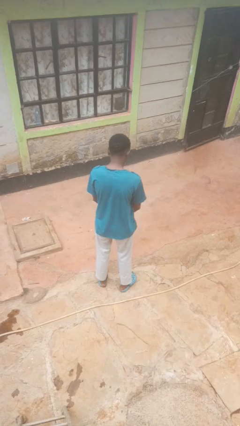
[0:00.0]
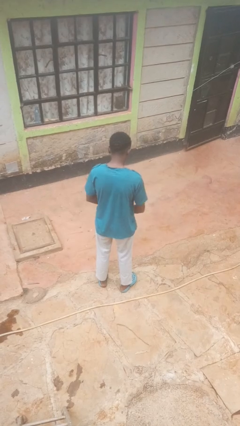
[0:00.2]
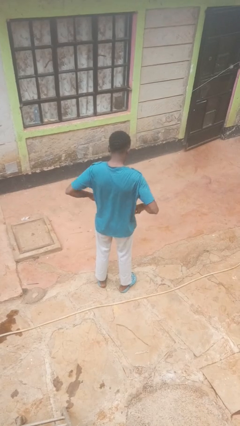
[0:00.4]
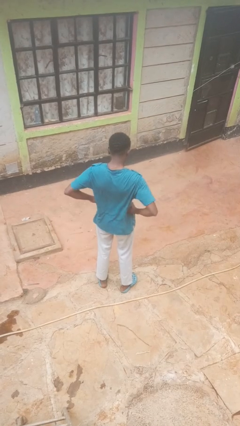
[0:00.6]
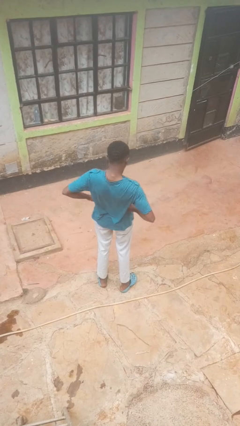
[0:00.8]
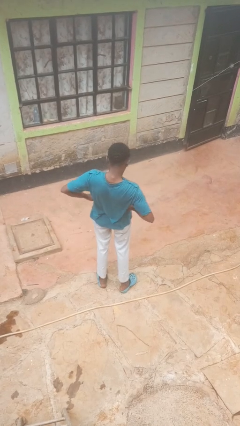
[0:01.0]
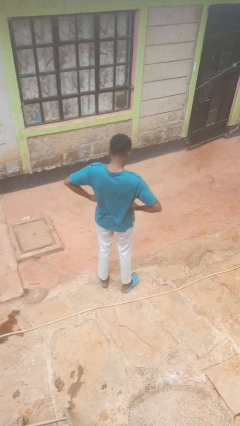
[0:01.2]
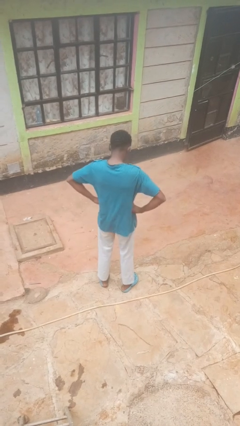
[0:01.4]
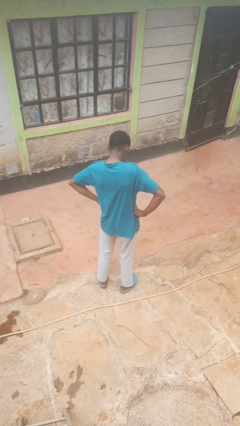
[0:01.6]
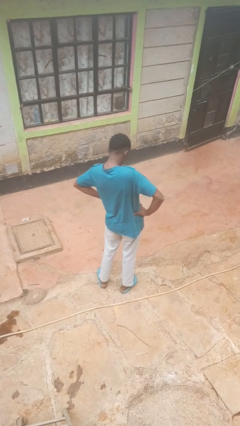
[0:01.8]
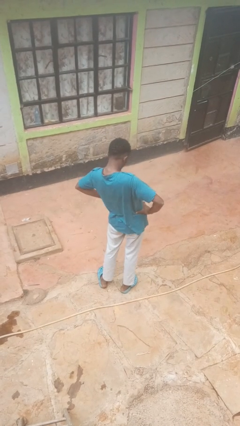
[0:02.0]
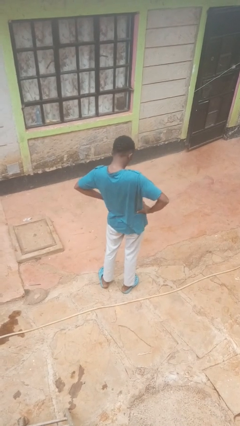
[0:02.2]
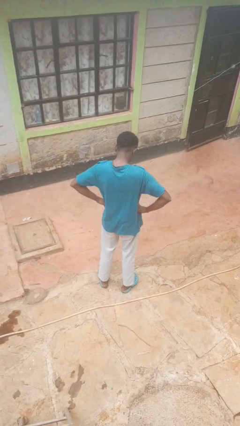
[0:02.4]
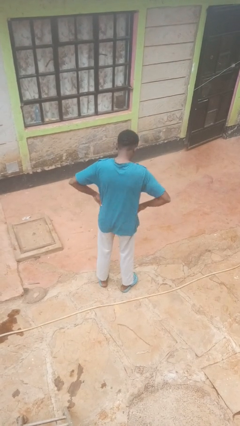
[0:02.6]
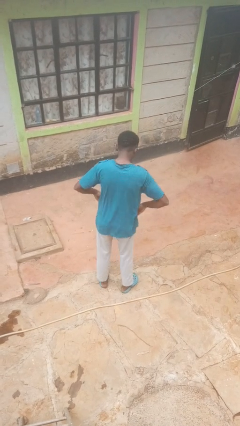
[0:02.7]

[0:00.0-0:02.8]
person wiggles hips

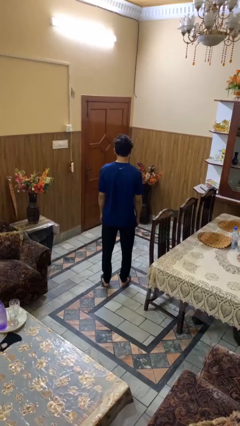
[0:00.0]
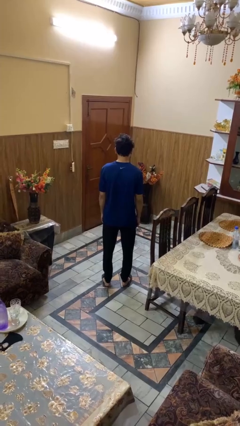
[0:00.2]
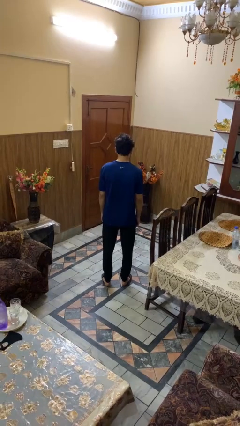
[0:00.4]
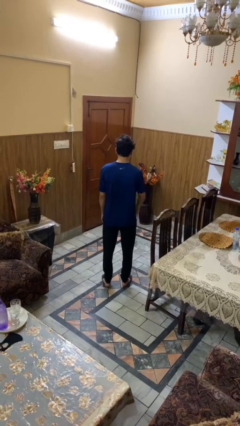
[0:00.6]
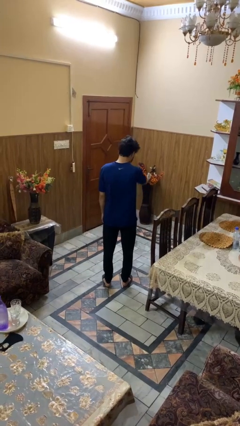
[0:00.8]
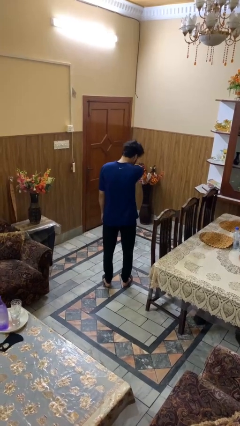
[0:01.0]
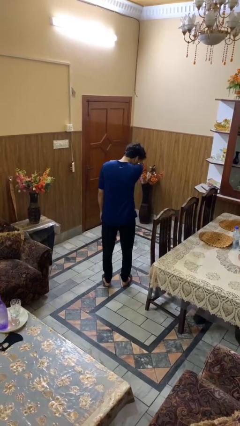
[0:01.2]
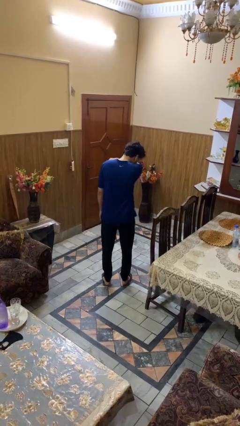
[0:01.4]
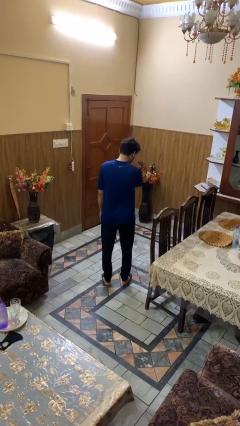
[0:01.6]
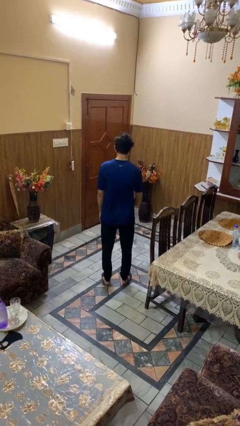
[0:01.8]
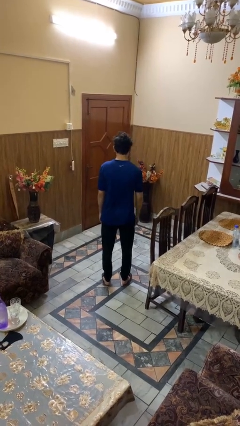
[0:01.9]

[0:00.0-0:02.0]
person sneezes into arm

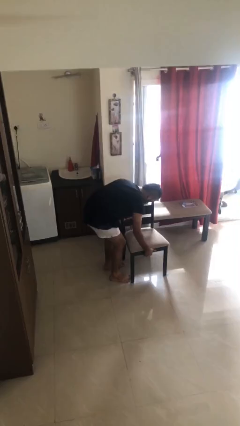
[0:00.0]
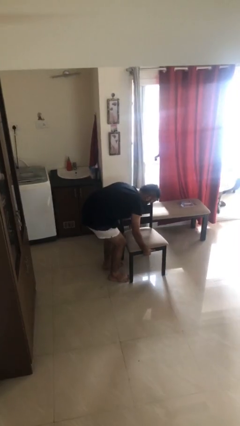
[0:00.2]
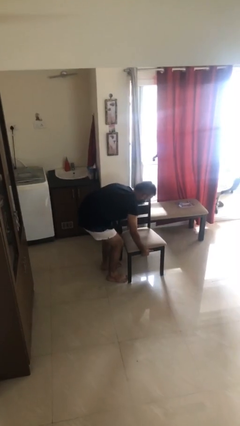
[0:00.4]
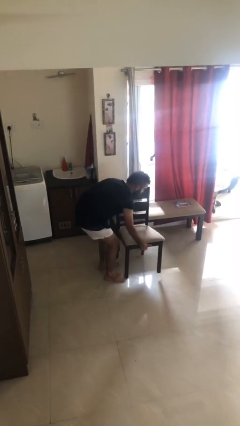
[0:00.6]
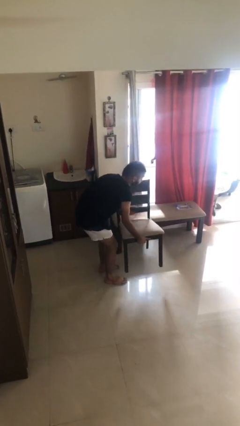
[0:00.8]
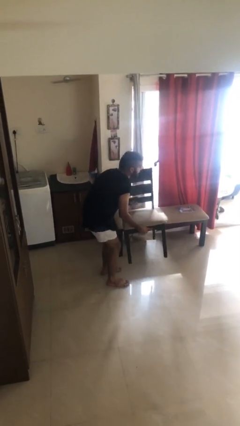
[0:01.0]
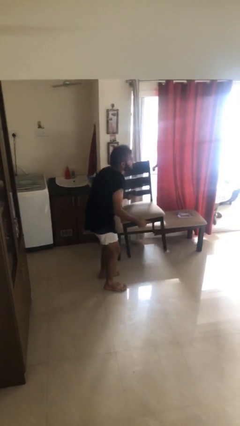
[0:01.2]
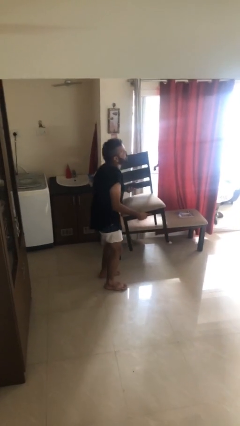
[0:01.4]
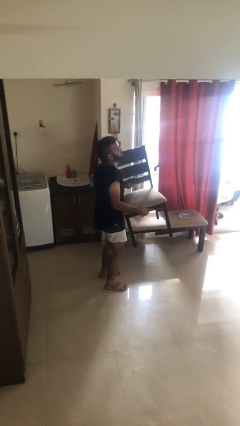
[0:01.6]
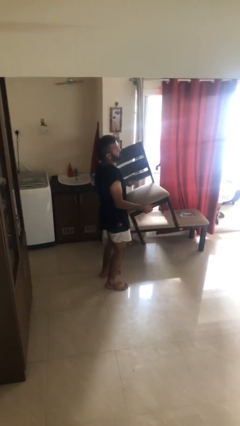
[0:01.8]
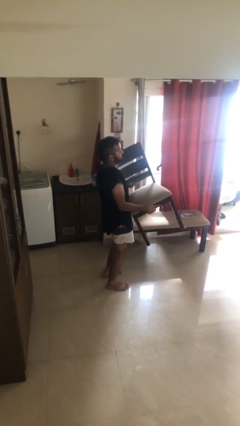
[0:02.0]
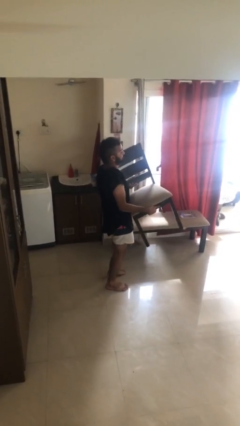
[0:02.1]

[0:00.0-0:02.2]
person picks up object from floor

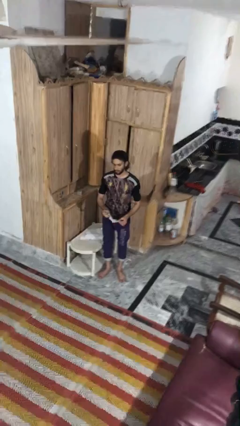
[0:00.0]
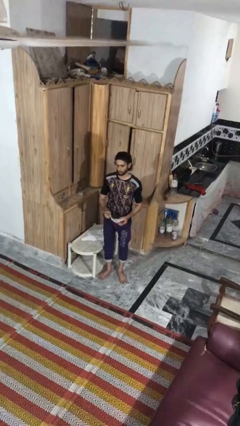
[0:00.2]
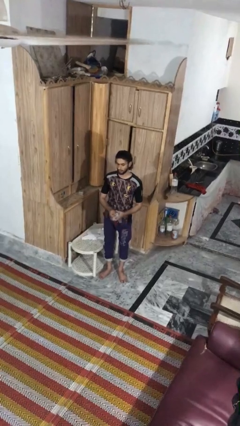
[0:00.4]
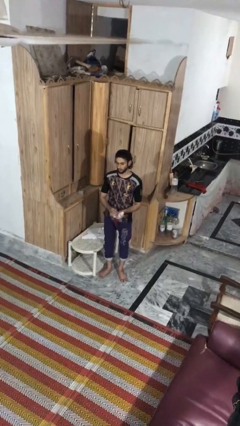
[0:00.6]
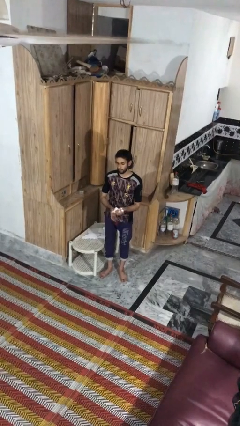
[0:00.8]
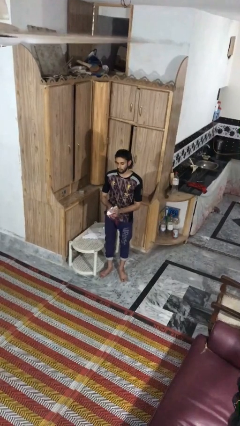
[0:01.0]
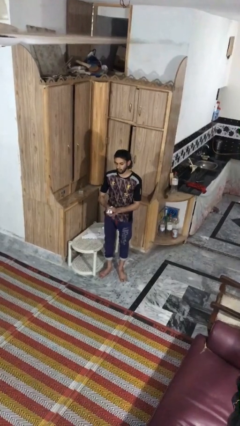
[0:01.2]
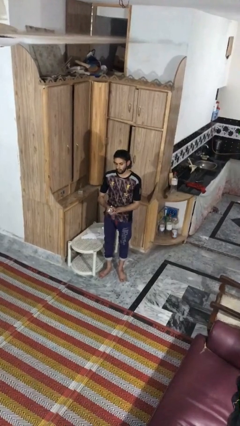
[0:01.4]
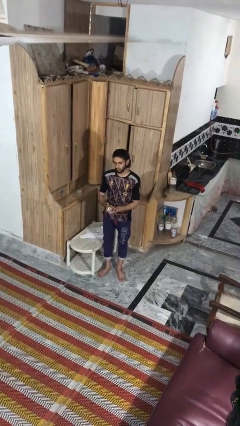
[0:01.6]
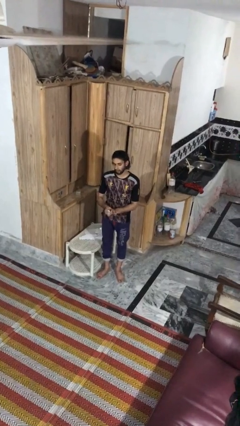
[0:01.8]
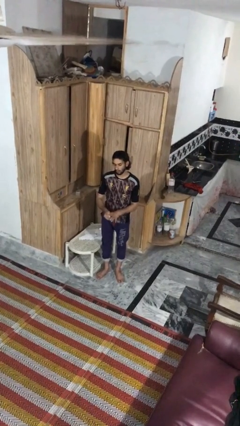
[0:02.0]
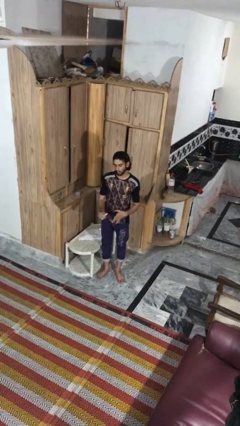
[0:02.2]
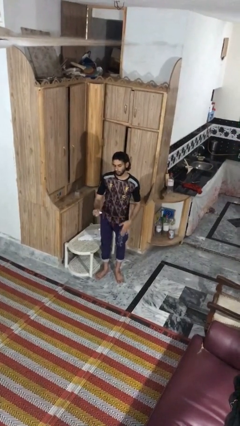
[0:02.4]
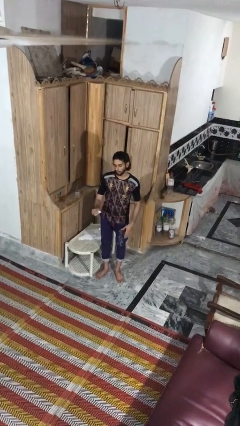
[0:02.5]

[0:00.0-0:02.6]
person crumples paper

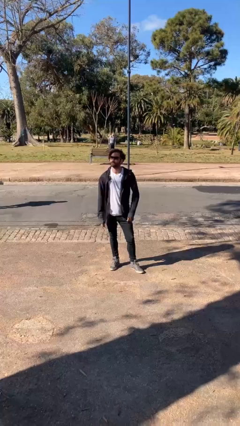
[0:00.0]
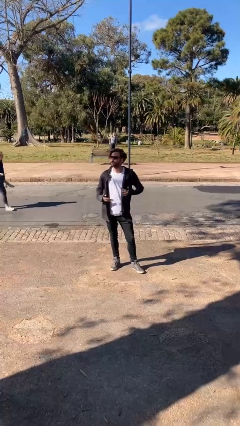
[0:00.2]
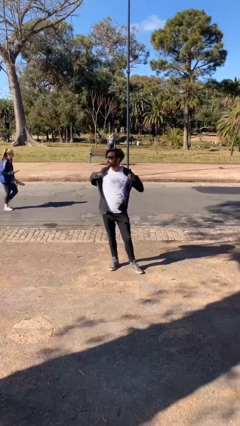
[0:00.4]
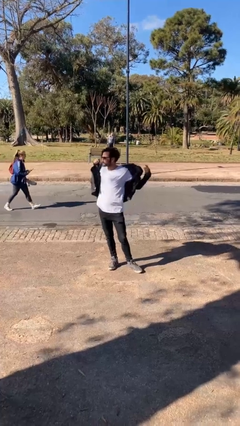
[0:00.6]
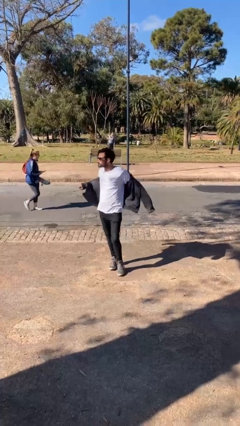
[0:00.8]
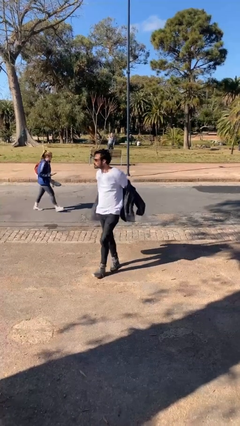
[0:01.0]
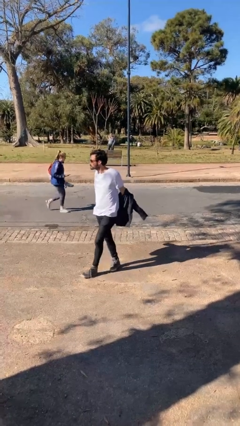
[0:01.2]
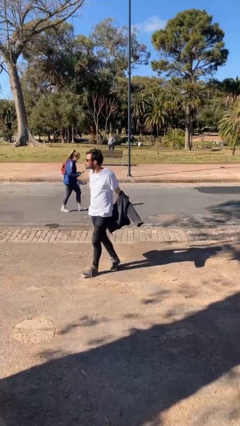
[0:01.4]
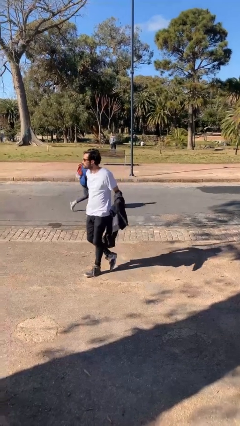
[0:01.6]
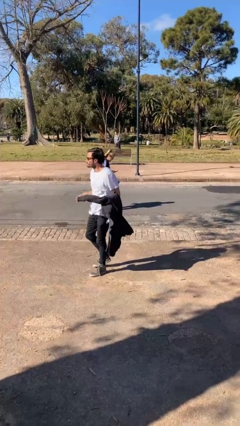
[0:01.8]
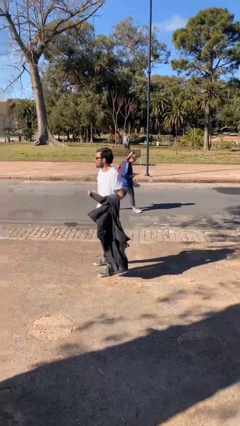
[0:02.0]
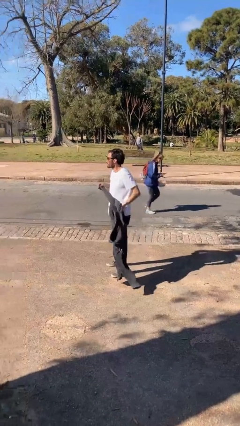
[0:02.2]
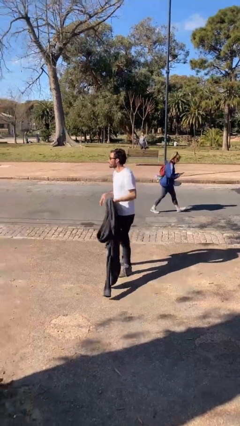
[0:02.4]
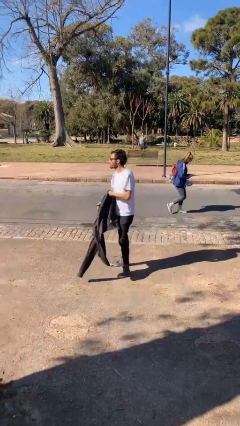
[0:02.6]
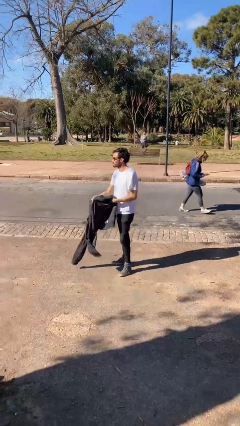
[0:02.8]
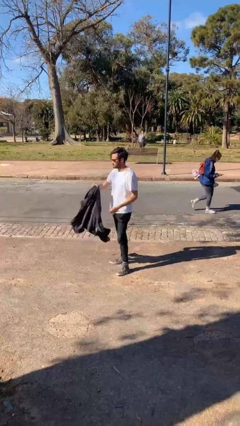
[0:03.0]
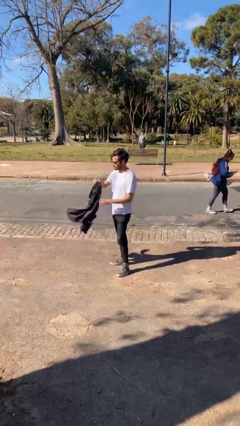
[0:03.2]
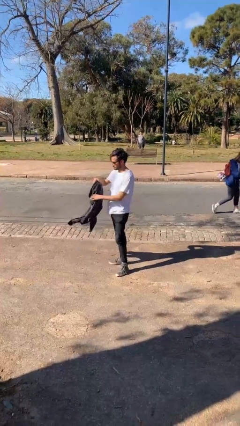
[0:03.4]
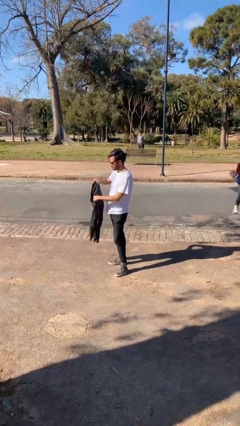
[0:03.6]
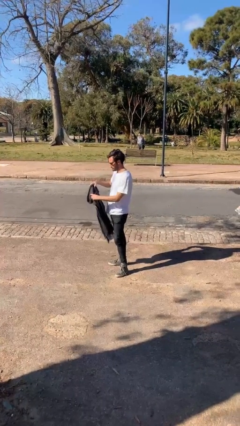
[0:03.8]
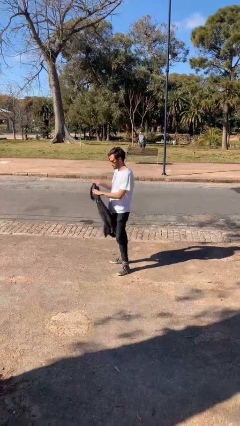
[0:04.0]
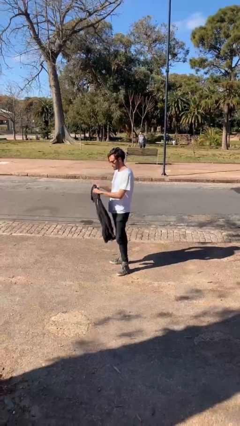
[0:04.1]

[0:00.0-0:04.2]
person takes off jacket

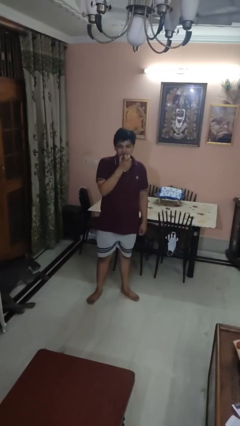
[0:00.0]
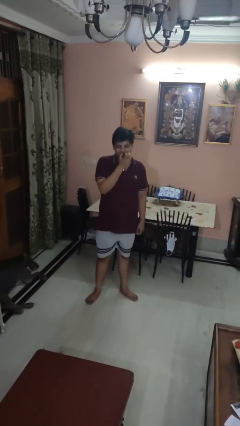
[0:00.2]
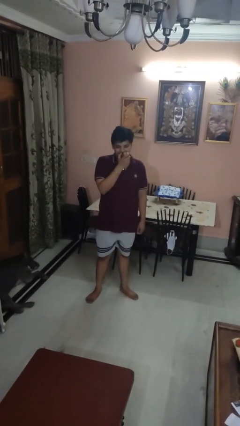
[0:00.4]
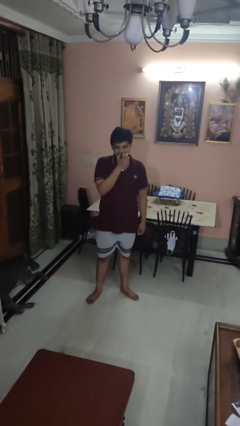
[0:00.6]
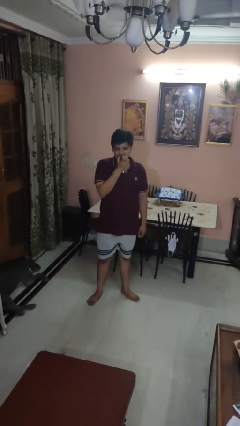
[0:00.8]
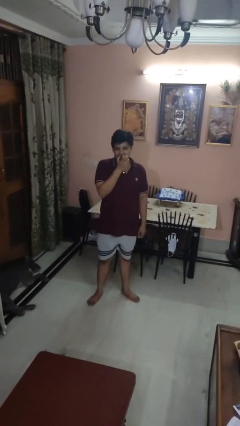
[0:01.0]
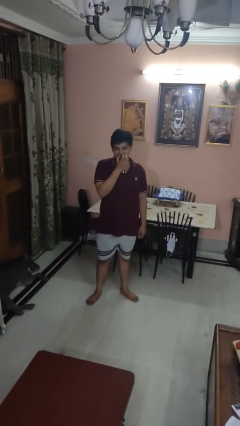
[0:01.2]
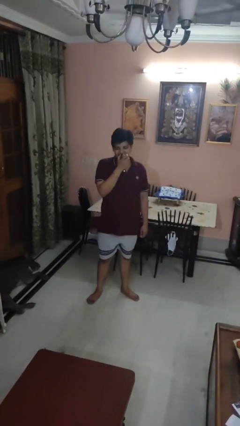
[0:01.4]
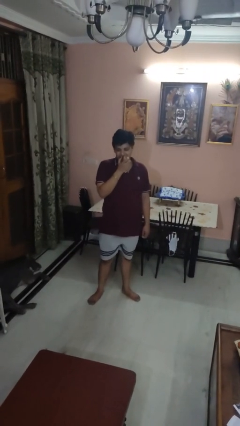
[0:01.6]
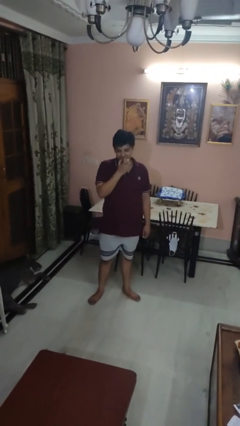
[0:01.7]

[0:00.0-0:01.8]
person eats apple

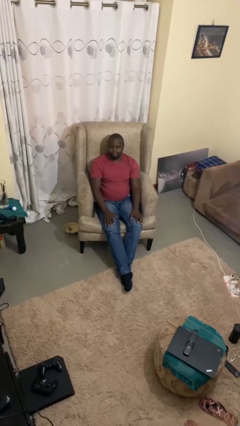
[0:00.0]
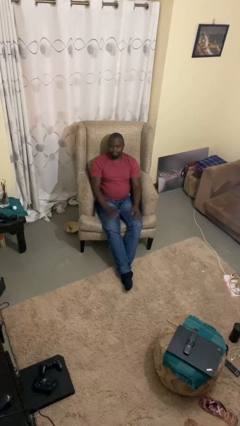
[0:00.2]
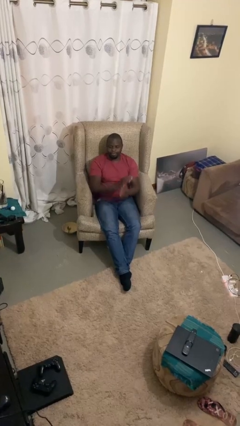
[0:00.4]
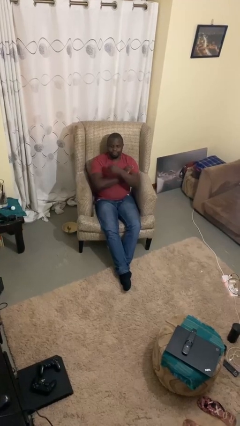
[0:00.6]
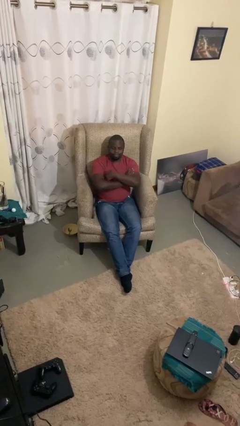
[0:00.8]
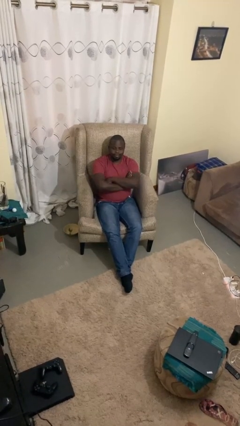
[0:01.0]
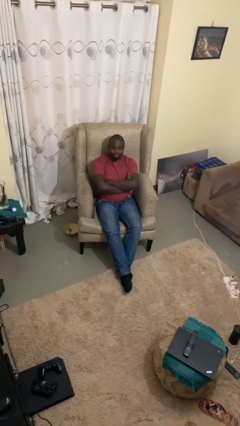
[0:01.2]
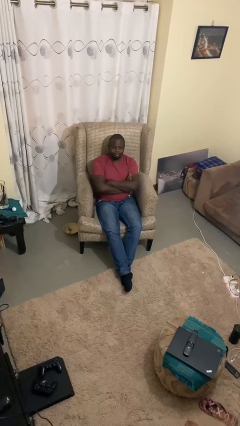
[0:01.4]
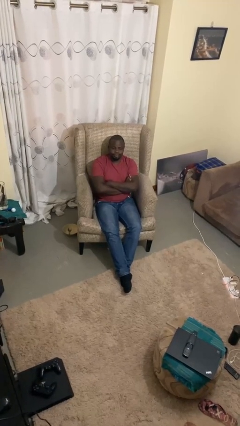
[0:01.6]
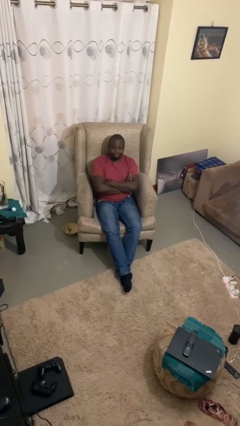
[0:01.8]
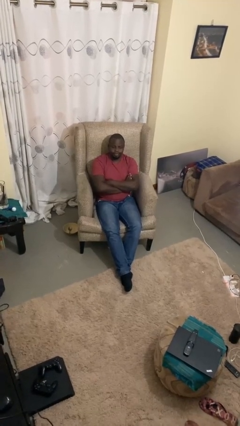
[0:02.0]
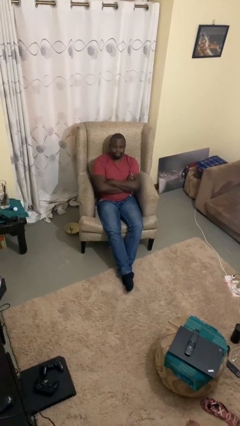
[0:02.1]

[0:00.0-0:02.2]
person crosses arms
